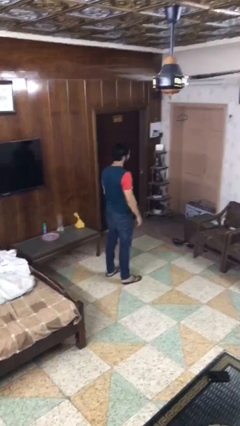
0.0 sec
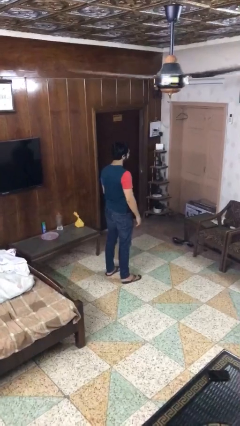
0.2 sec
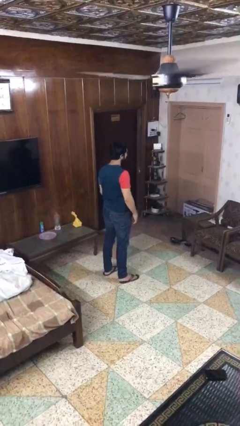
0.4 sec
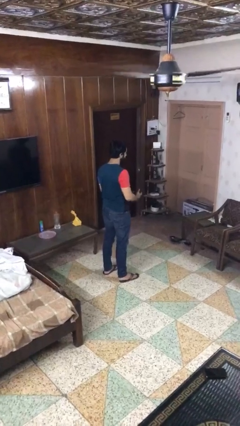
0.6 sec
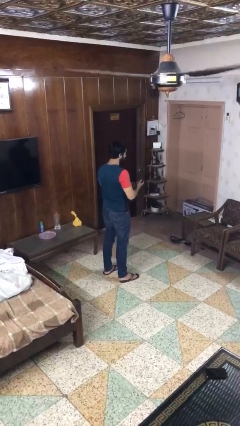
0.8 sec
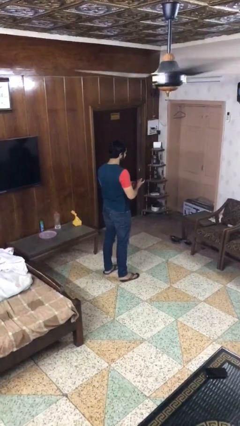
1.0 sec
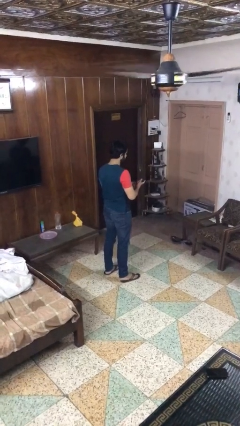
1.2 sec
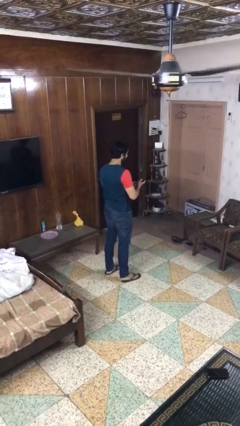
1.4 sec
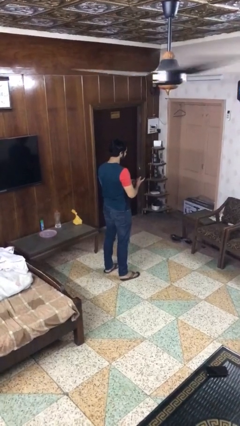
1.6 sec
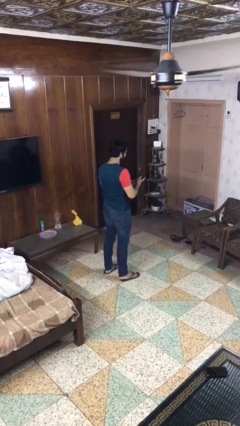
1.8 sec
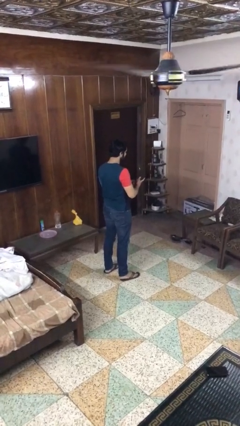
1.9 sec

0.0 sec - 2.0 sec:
person files fingernails

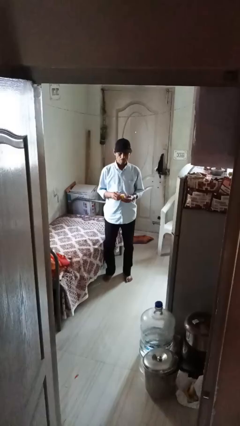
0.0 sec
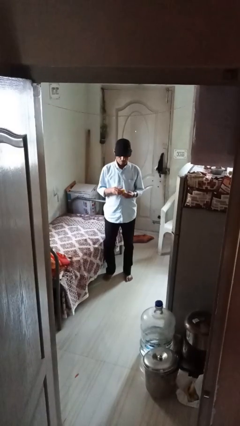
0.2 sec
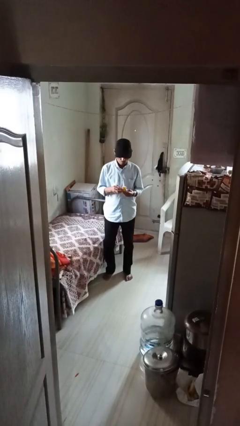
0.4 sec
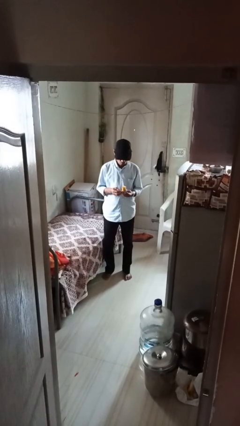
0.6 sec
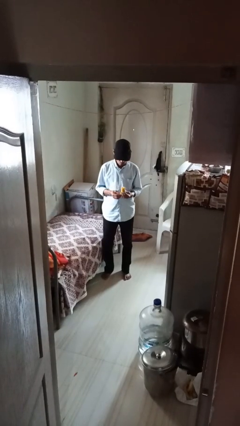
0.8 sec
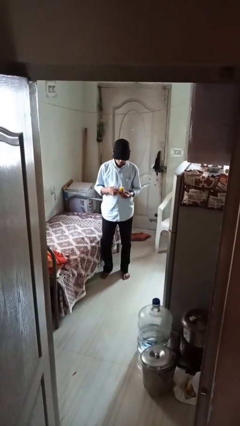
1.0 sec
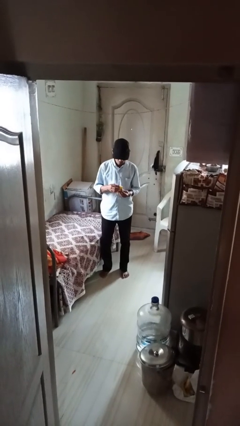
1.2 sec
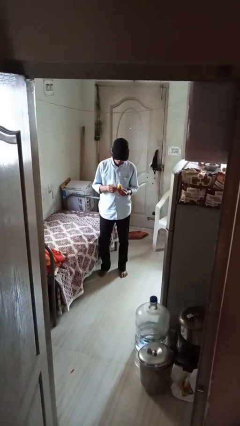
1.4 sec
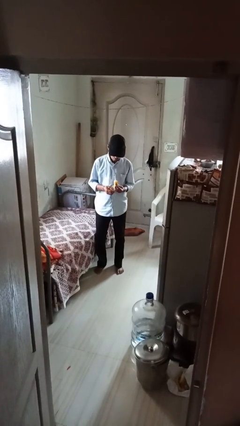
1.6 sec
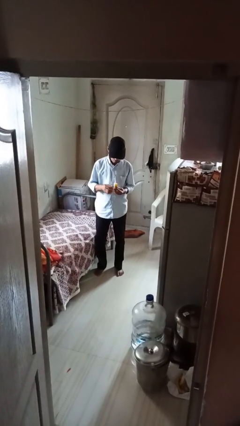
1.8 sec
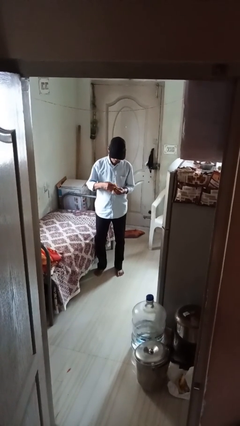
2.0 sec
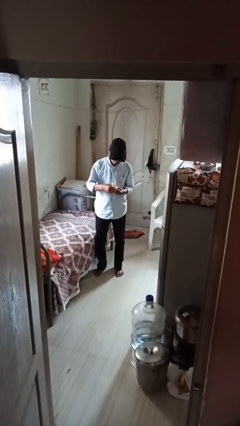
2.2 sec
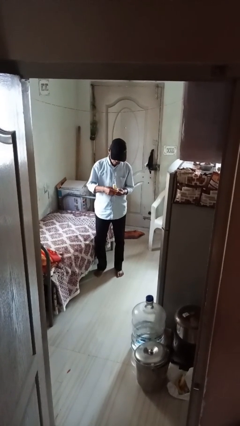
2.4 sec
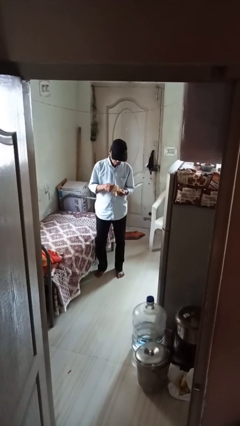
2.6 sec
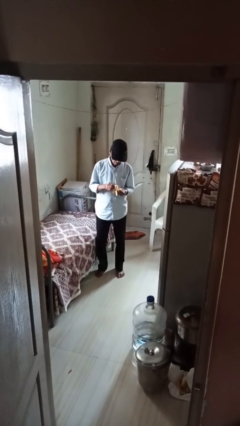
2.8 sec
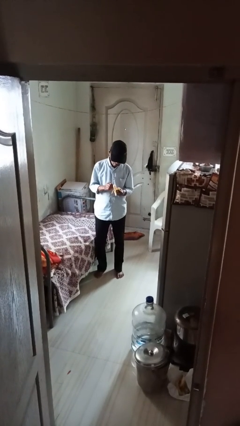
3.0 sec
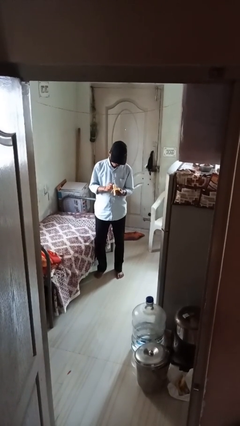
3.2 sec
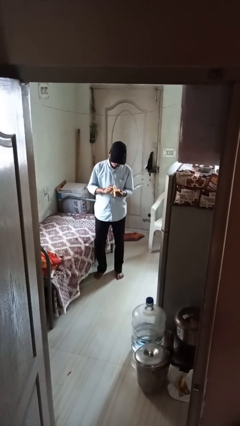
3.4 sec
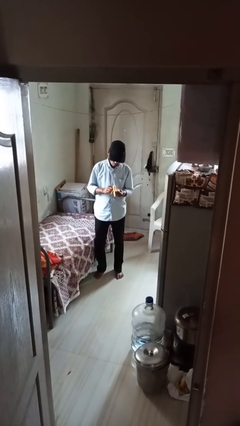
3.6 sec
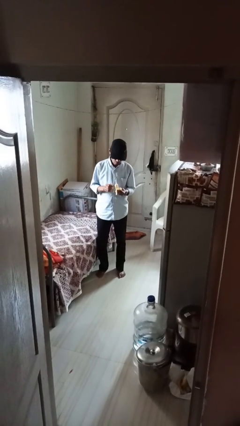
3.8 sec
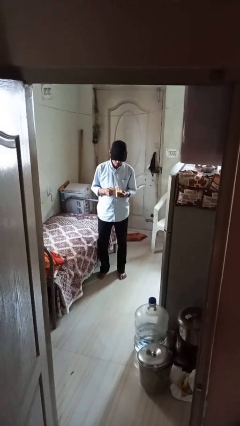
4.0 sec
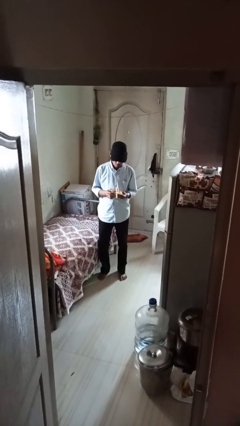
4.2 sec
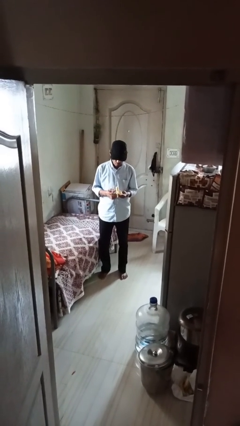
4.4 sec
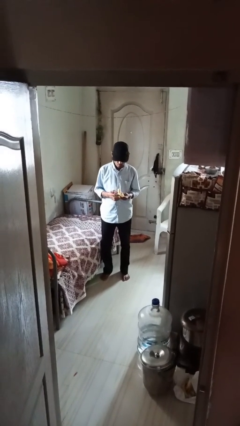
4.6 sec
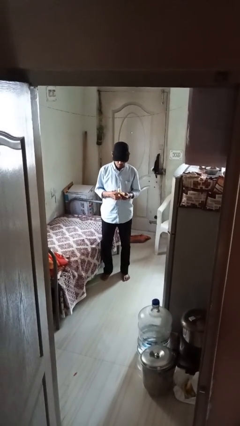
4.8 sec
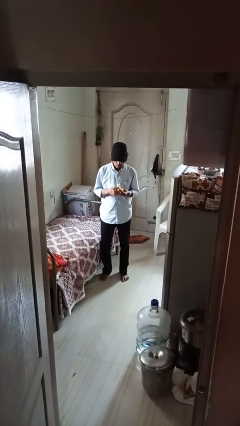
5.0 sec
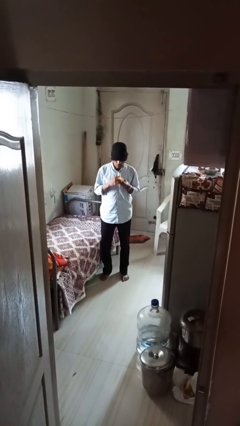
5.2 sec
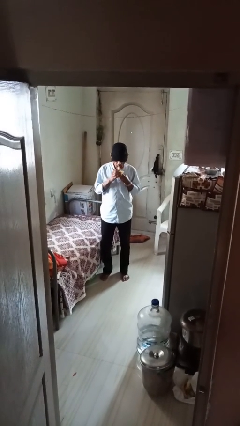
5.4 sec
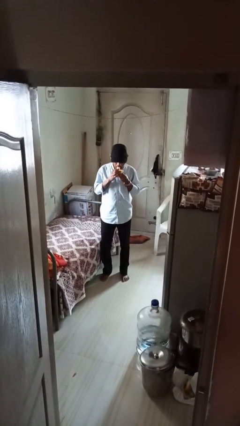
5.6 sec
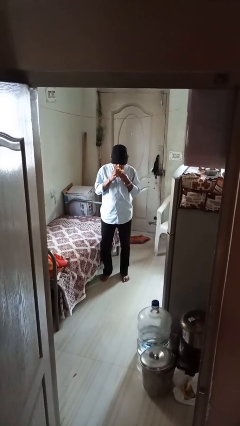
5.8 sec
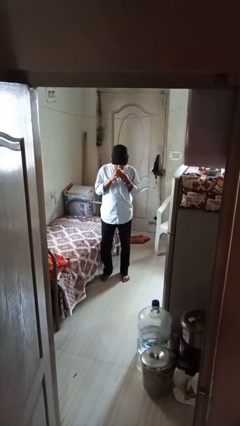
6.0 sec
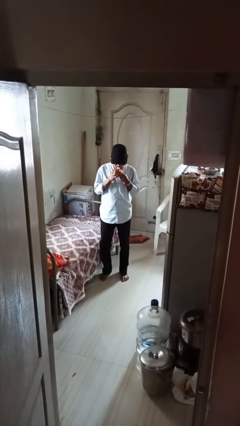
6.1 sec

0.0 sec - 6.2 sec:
person eats banana

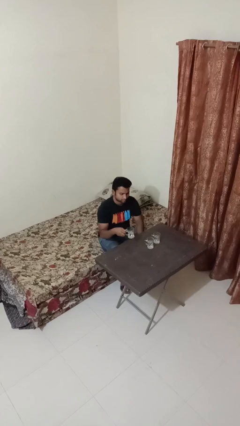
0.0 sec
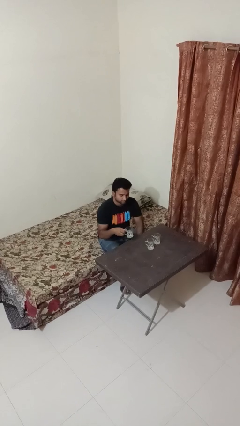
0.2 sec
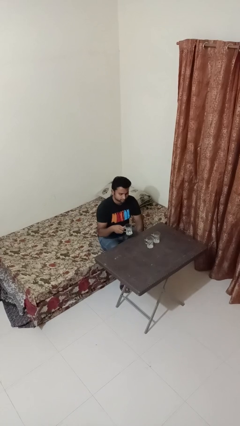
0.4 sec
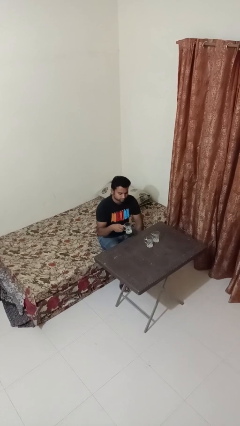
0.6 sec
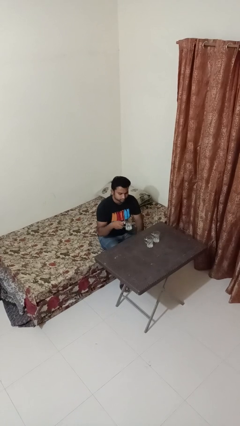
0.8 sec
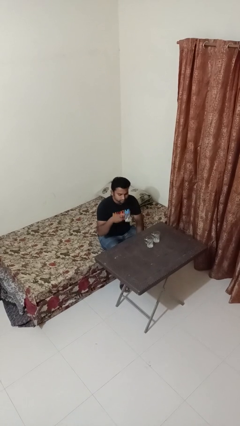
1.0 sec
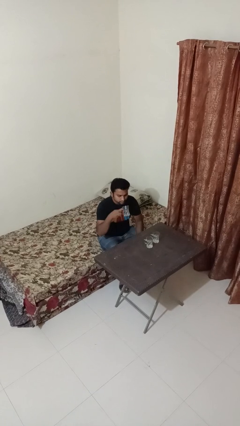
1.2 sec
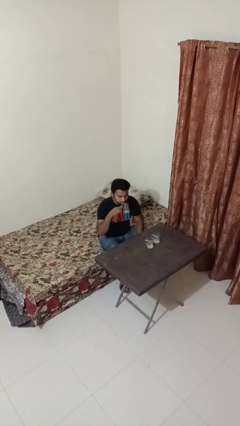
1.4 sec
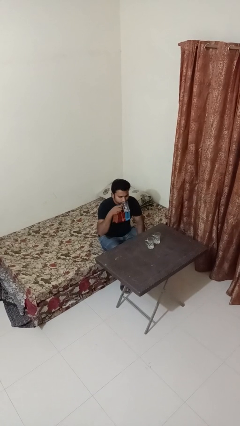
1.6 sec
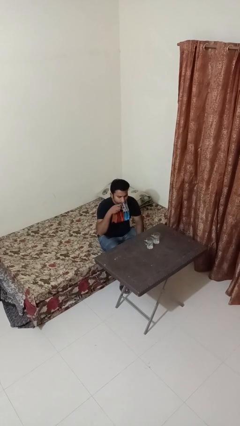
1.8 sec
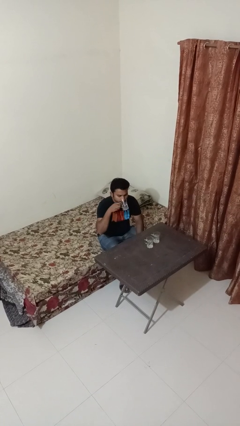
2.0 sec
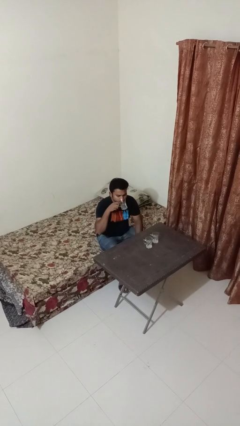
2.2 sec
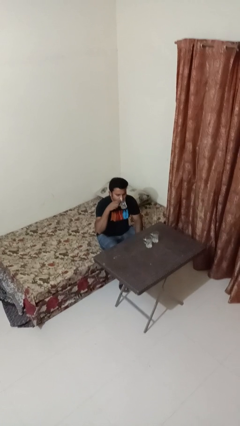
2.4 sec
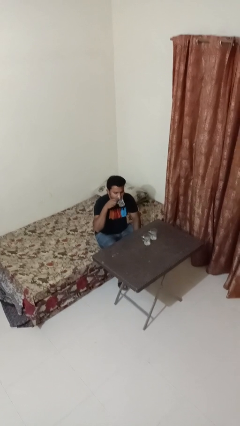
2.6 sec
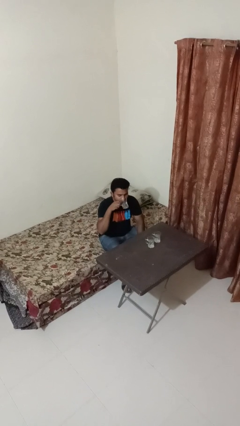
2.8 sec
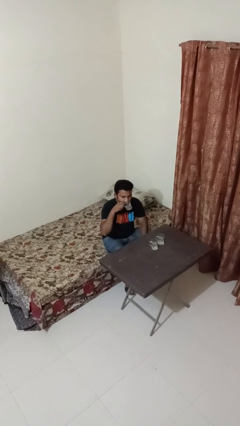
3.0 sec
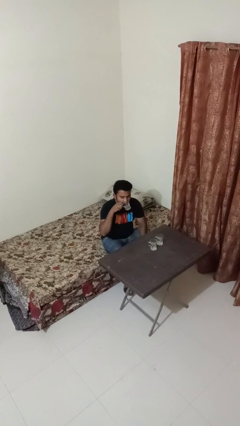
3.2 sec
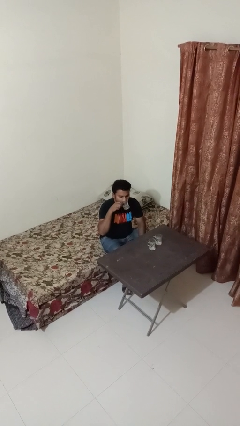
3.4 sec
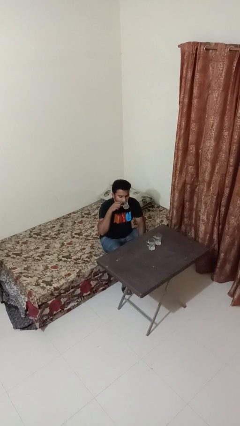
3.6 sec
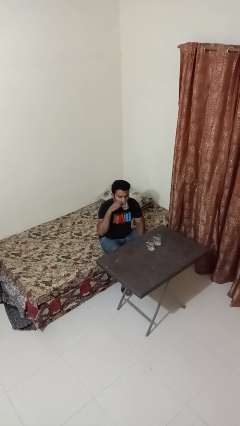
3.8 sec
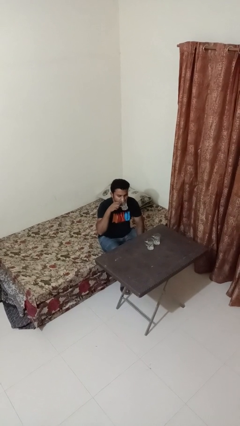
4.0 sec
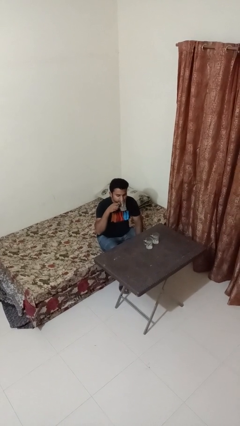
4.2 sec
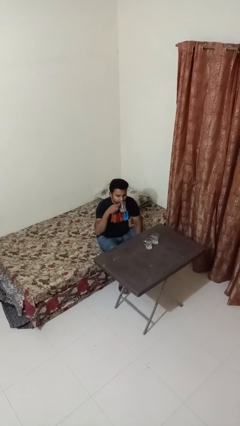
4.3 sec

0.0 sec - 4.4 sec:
person drinks from shotglass

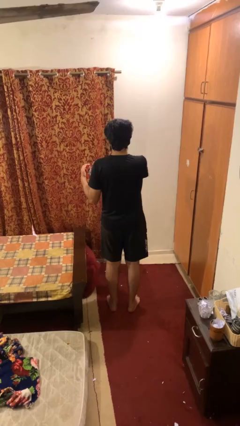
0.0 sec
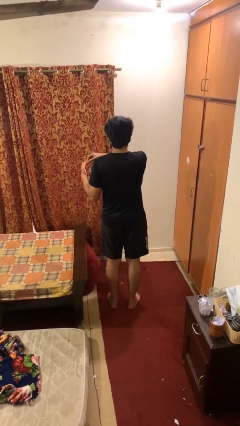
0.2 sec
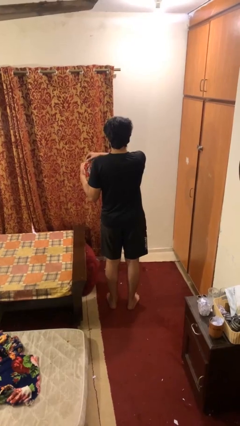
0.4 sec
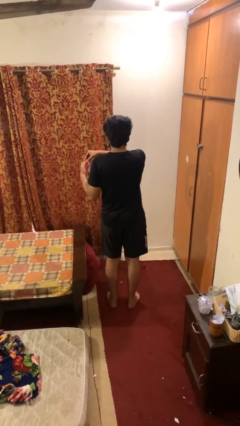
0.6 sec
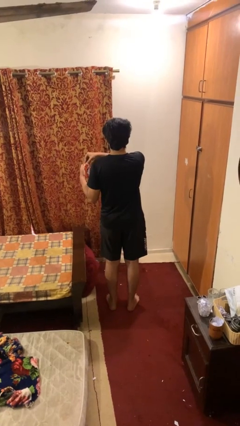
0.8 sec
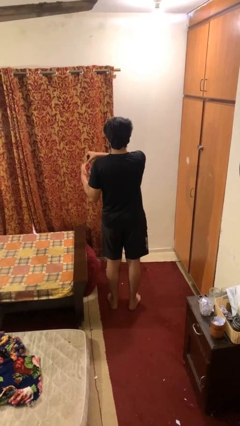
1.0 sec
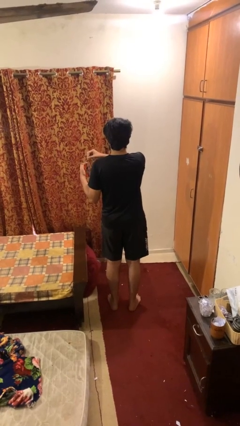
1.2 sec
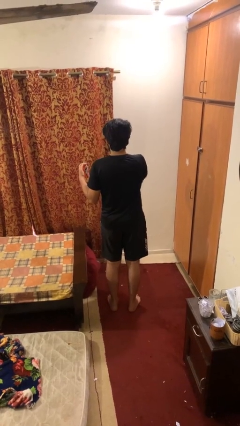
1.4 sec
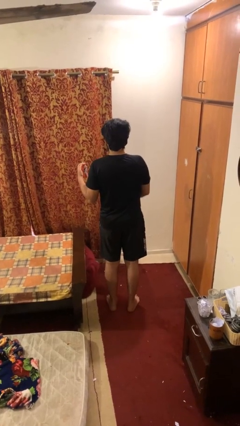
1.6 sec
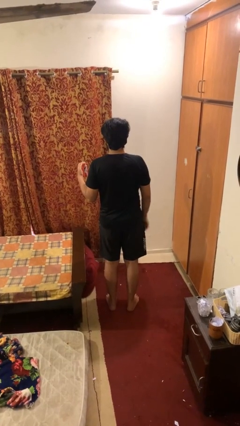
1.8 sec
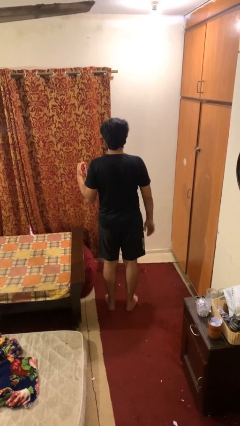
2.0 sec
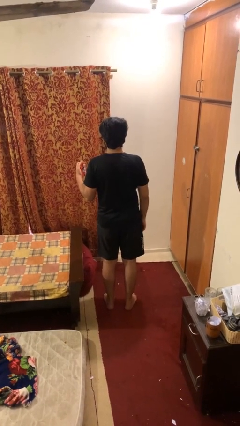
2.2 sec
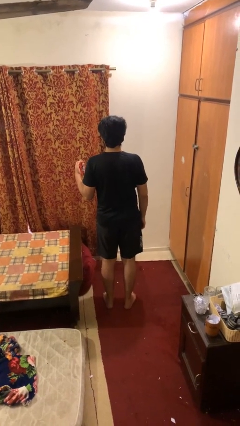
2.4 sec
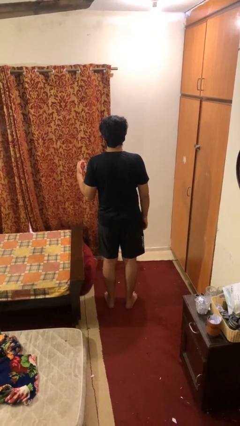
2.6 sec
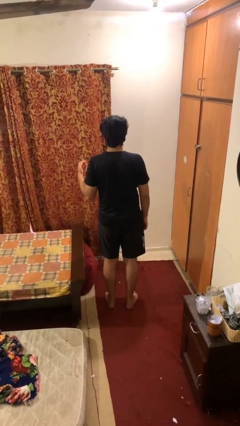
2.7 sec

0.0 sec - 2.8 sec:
person opens beverage can

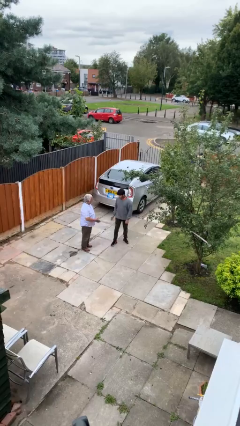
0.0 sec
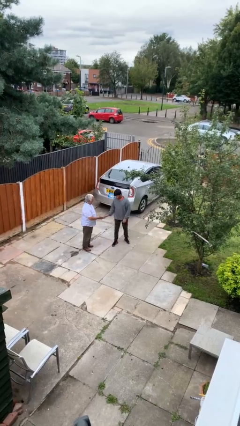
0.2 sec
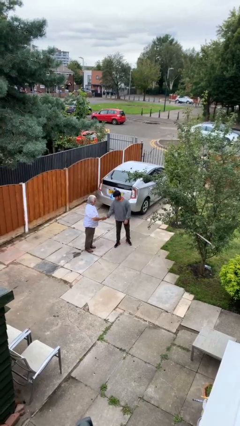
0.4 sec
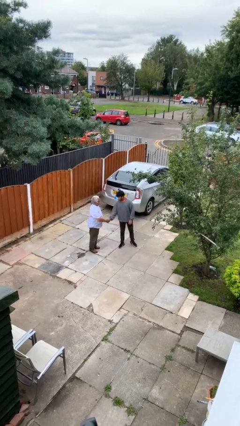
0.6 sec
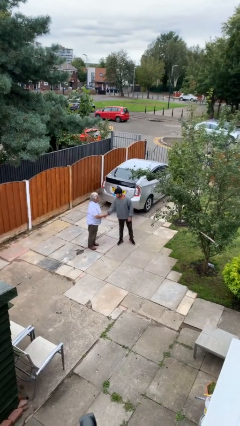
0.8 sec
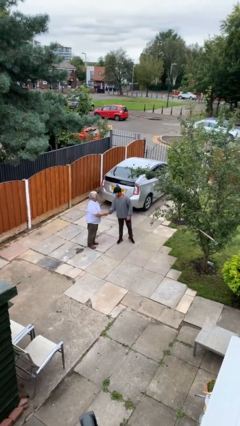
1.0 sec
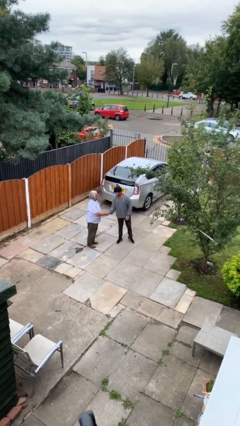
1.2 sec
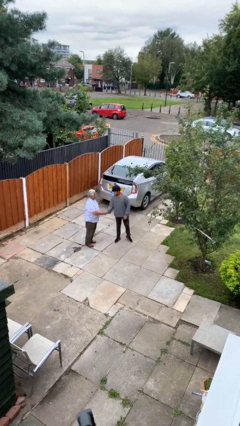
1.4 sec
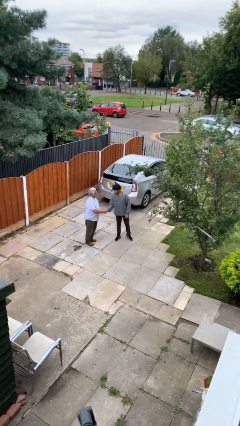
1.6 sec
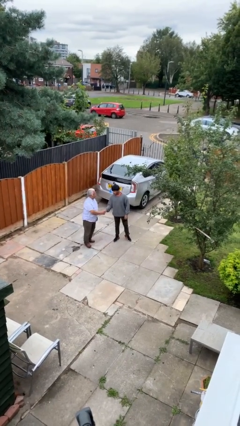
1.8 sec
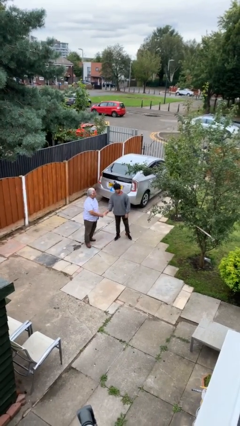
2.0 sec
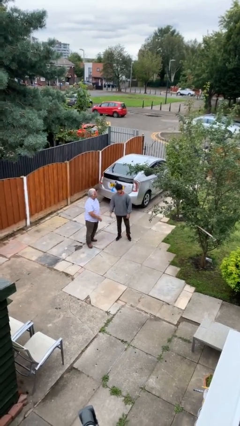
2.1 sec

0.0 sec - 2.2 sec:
person shakes hand

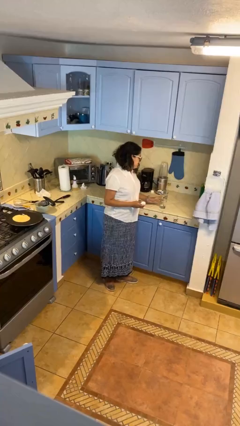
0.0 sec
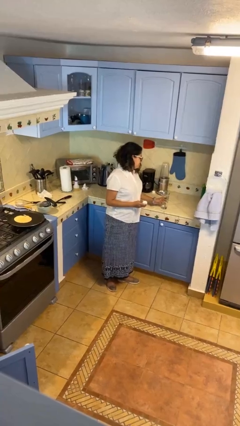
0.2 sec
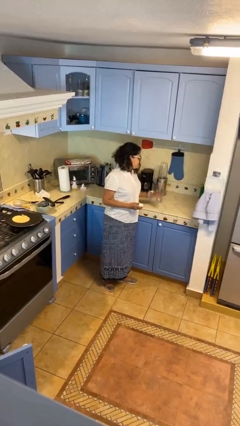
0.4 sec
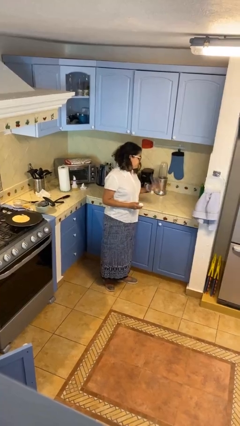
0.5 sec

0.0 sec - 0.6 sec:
person drinks from cup
